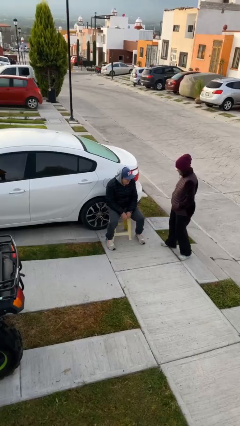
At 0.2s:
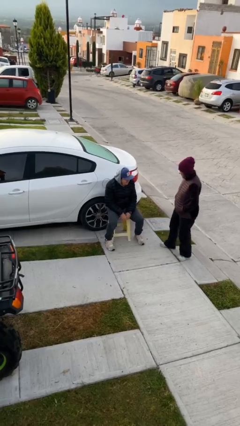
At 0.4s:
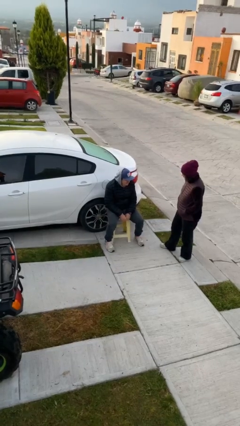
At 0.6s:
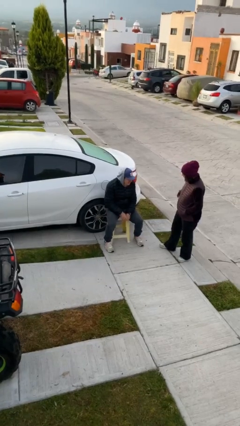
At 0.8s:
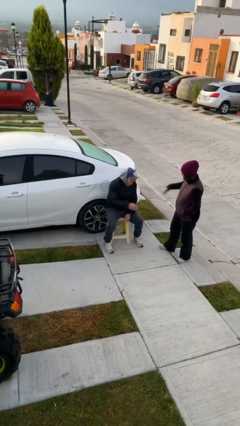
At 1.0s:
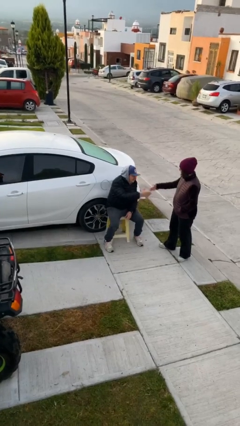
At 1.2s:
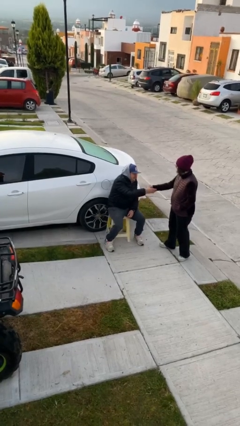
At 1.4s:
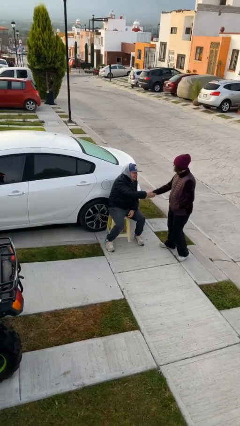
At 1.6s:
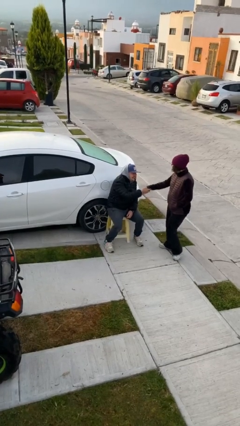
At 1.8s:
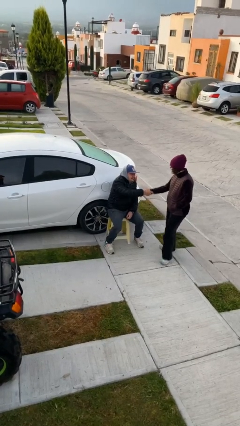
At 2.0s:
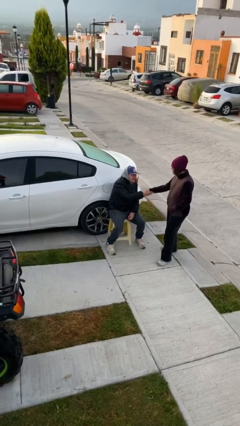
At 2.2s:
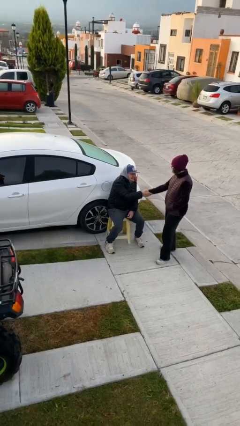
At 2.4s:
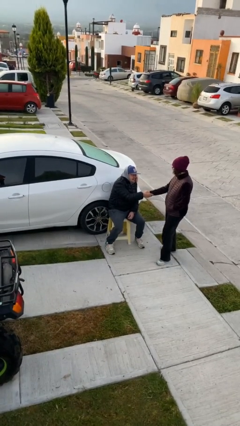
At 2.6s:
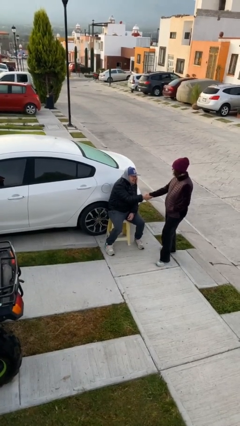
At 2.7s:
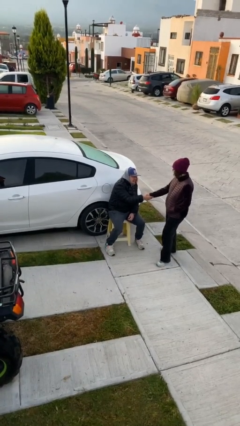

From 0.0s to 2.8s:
person shakes hand

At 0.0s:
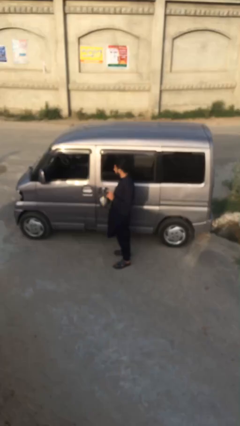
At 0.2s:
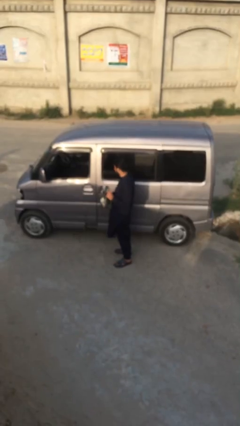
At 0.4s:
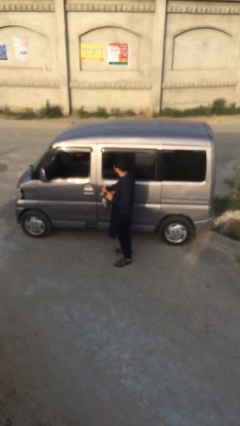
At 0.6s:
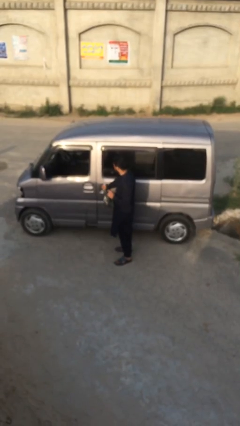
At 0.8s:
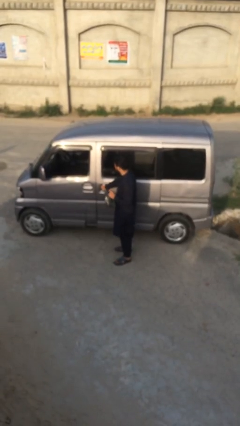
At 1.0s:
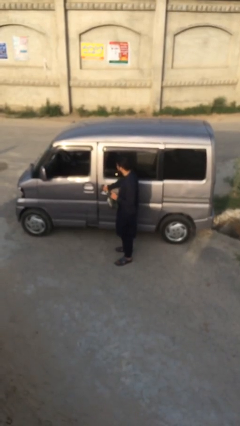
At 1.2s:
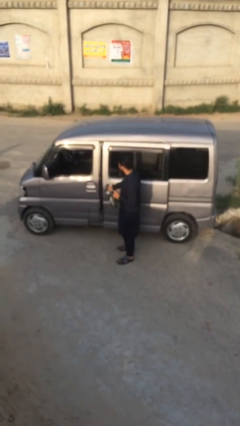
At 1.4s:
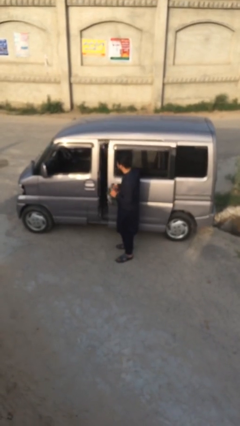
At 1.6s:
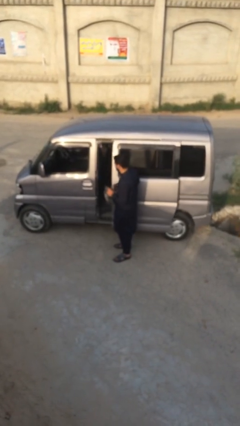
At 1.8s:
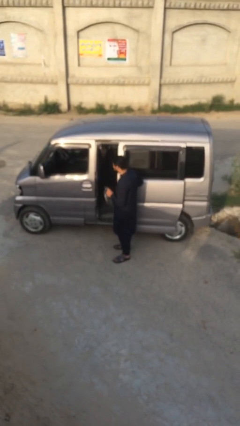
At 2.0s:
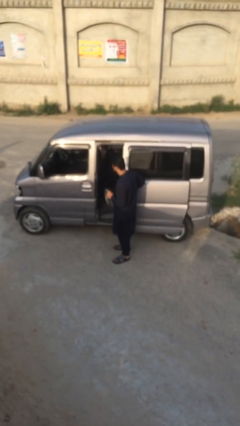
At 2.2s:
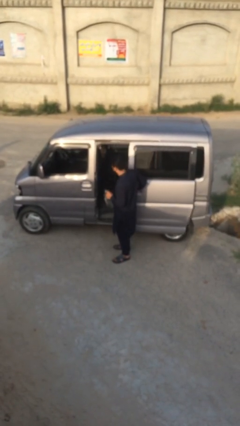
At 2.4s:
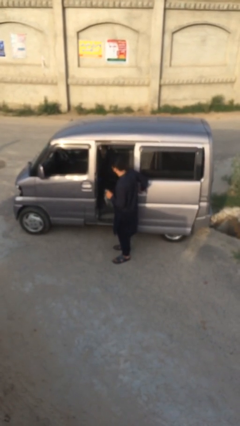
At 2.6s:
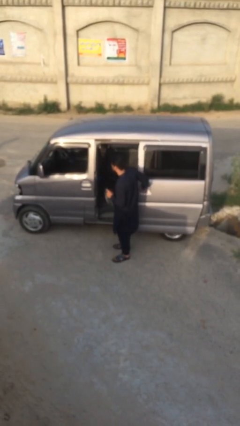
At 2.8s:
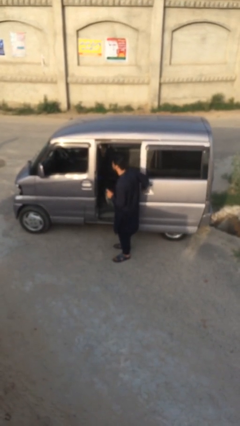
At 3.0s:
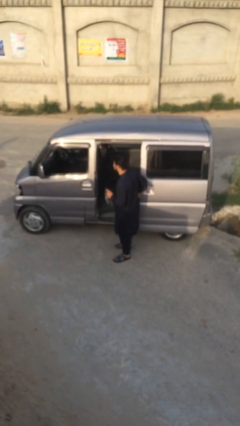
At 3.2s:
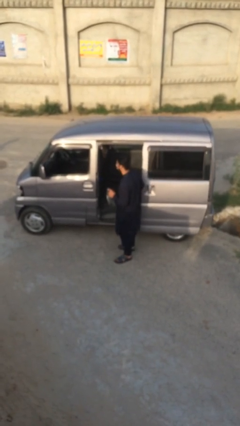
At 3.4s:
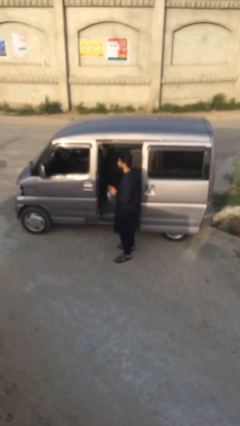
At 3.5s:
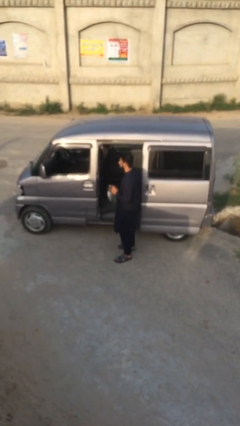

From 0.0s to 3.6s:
person opens car door

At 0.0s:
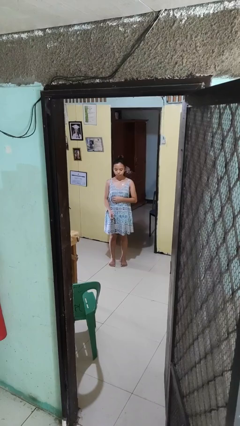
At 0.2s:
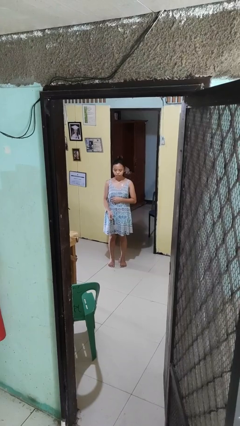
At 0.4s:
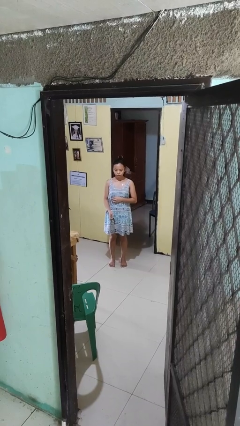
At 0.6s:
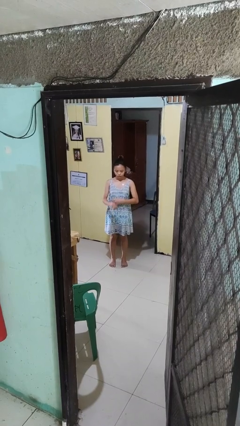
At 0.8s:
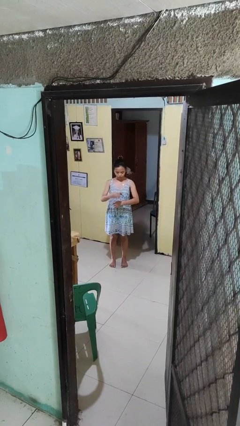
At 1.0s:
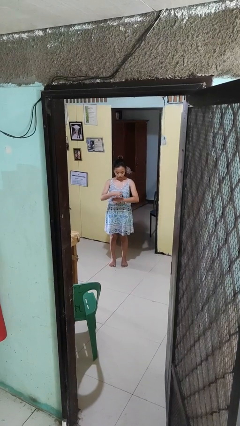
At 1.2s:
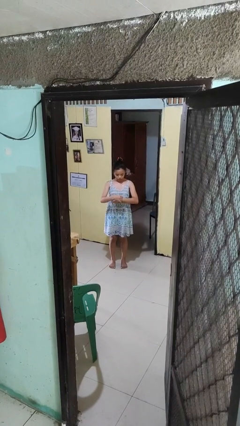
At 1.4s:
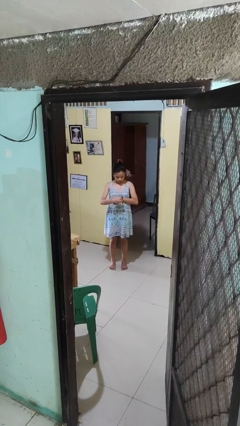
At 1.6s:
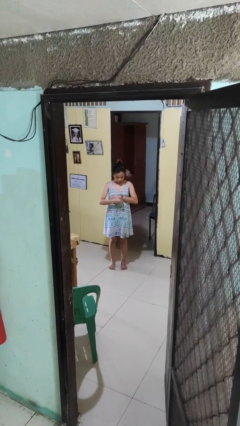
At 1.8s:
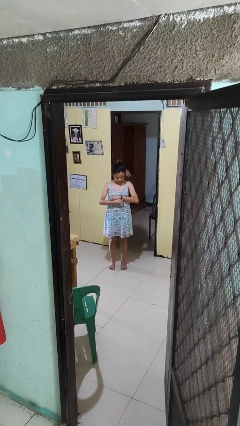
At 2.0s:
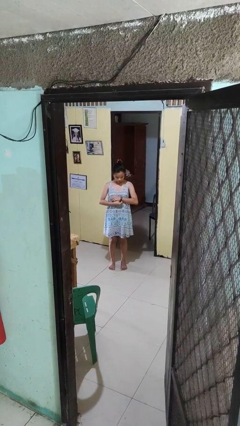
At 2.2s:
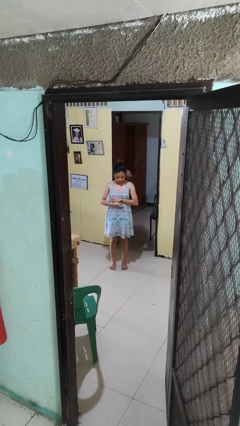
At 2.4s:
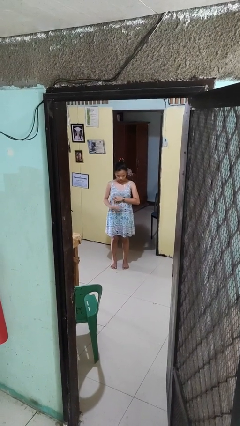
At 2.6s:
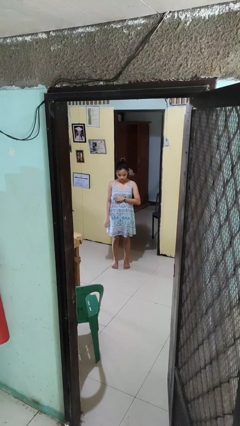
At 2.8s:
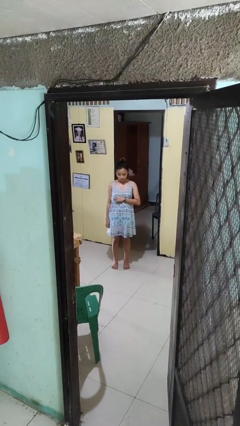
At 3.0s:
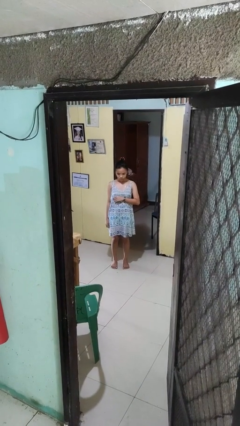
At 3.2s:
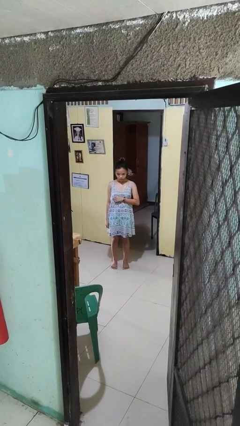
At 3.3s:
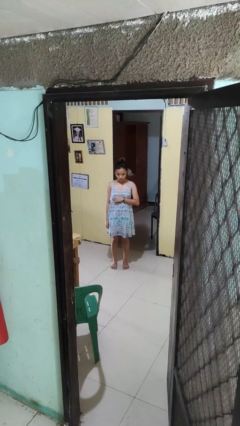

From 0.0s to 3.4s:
person puts on wristwatch

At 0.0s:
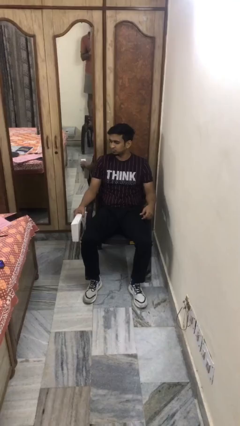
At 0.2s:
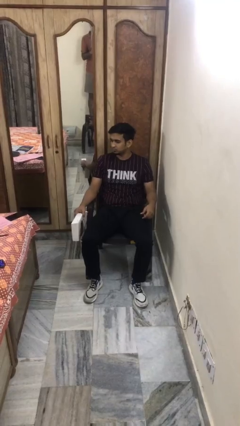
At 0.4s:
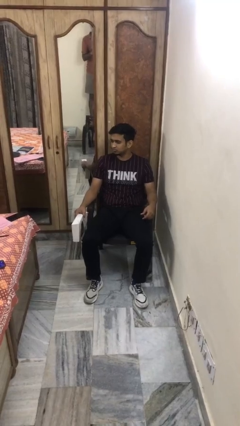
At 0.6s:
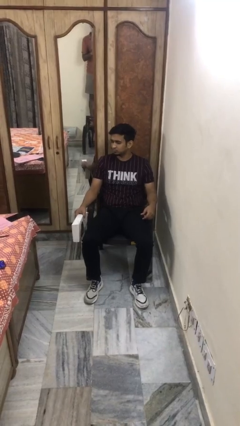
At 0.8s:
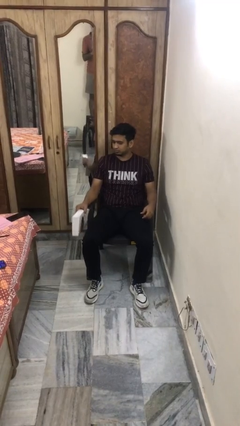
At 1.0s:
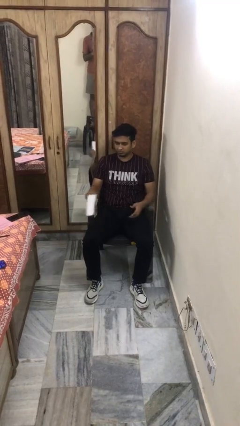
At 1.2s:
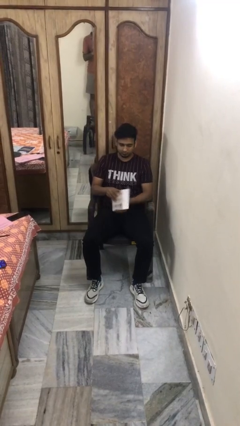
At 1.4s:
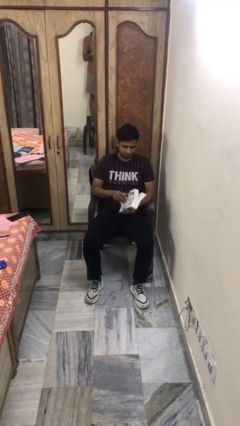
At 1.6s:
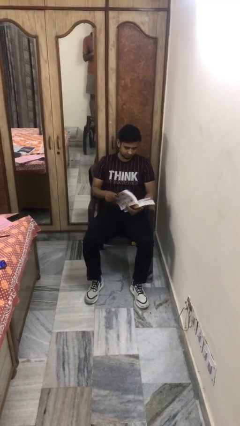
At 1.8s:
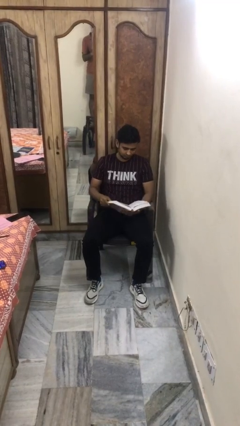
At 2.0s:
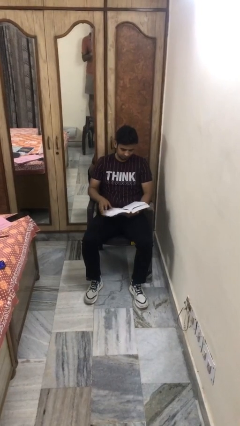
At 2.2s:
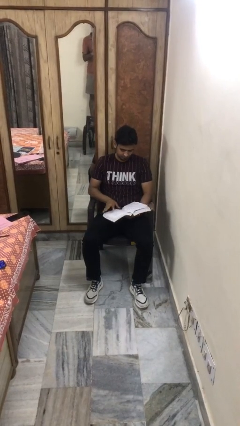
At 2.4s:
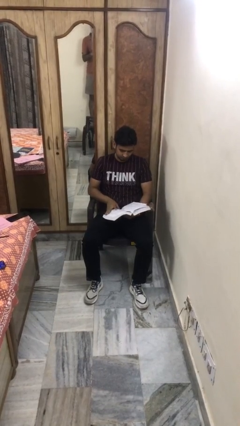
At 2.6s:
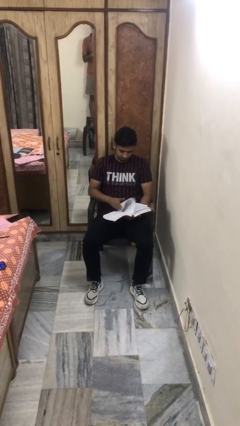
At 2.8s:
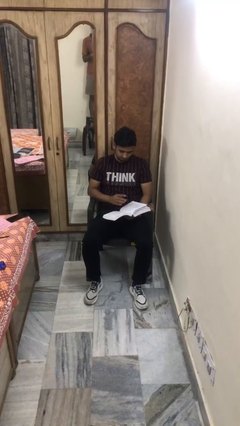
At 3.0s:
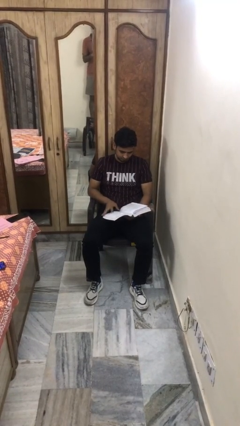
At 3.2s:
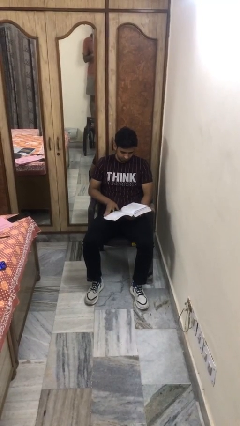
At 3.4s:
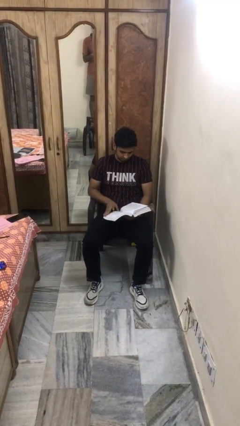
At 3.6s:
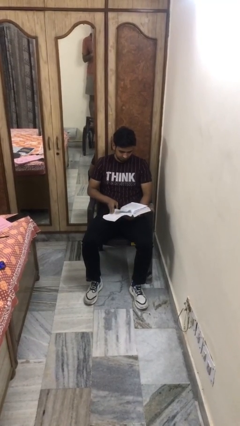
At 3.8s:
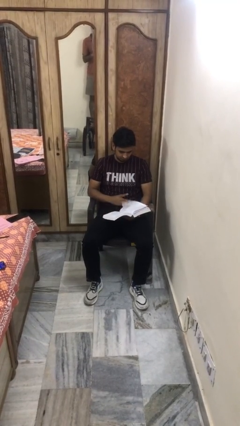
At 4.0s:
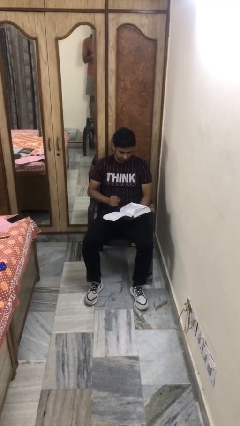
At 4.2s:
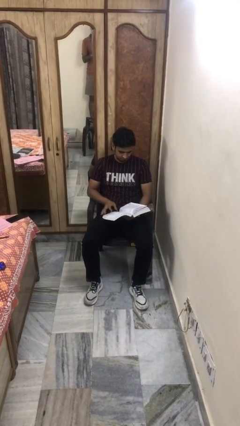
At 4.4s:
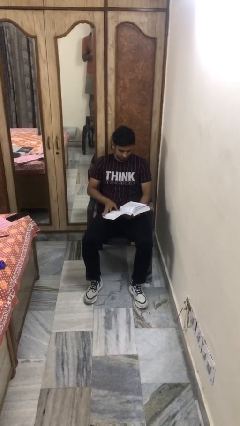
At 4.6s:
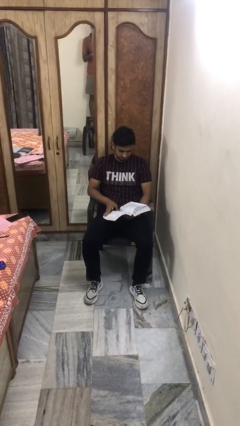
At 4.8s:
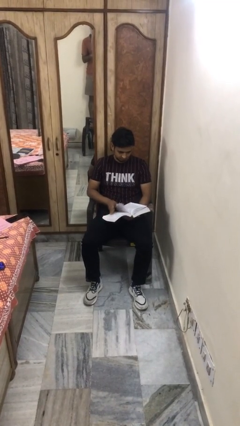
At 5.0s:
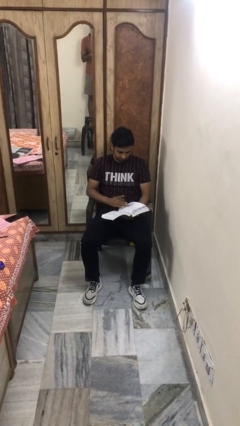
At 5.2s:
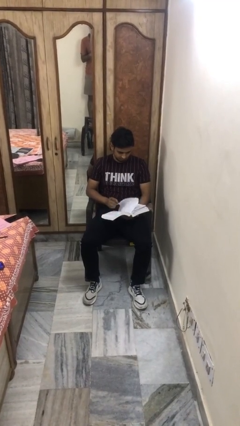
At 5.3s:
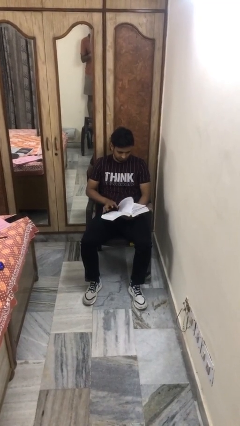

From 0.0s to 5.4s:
person reads book

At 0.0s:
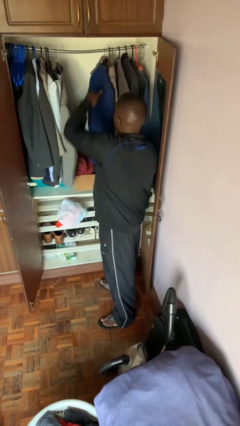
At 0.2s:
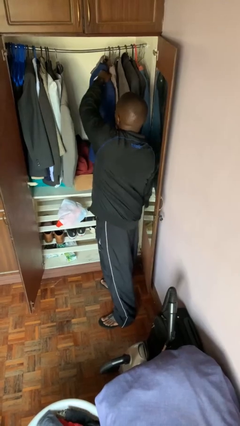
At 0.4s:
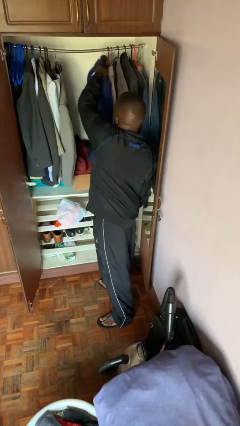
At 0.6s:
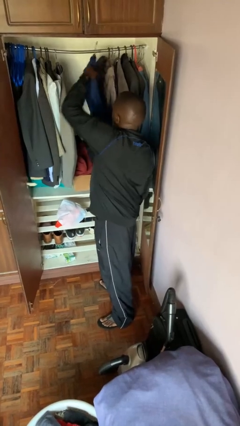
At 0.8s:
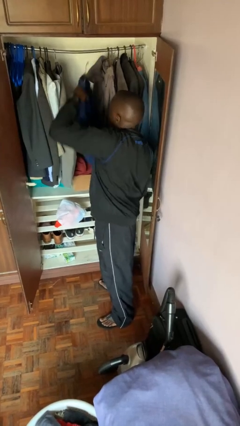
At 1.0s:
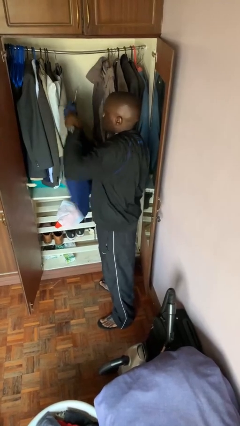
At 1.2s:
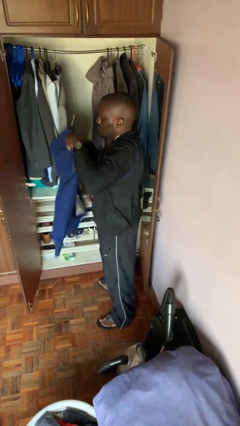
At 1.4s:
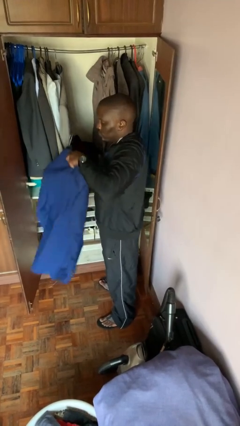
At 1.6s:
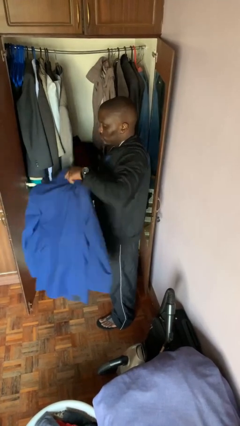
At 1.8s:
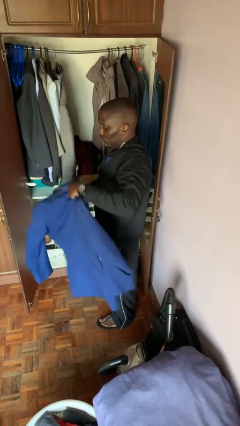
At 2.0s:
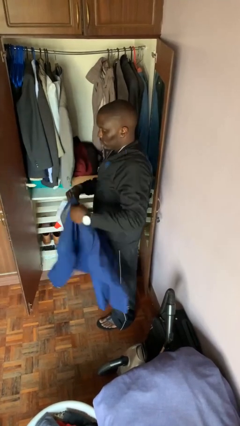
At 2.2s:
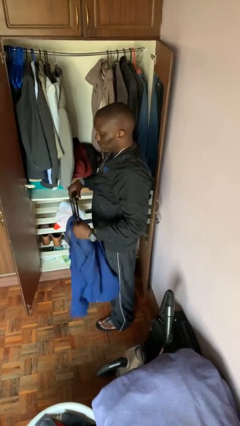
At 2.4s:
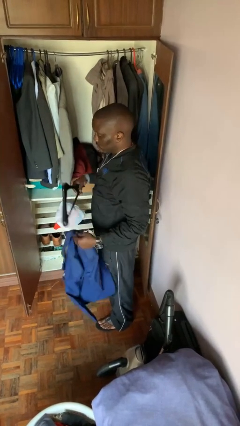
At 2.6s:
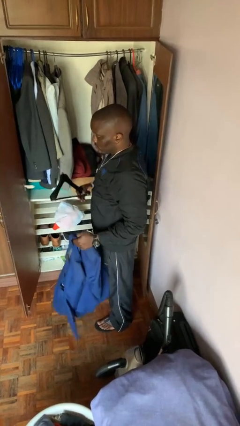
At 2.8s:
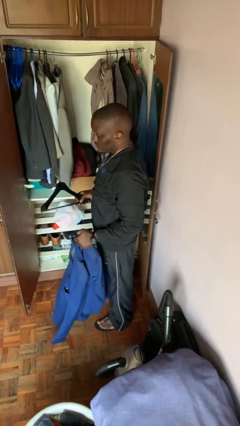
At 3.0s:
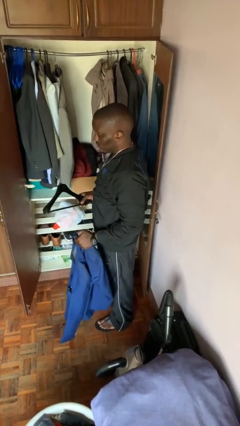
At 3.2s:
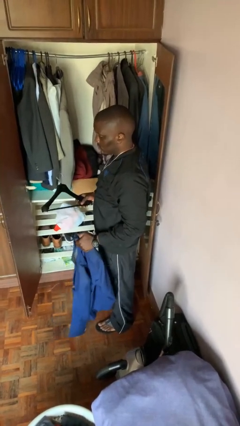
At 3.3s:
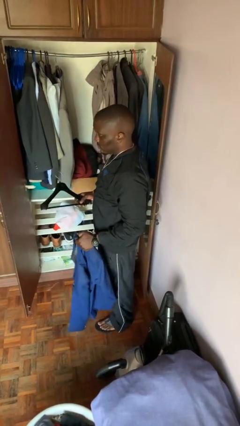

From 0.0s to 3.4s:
person takes clothes from closet
